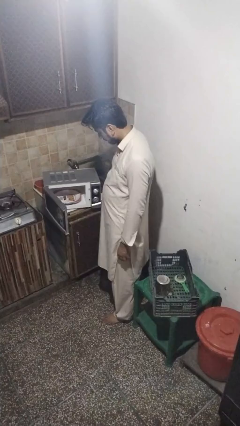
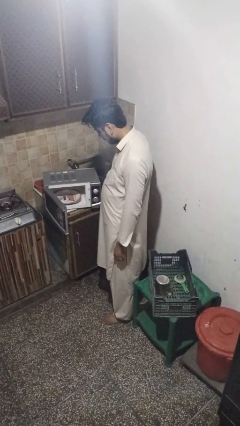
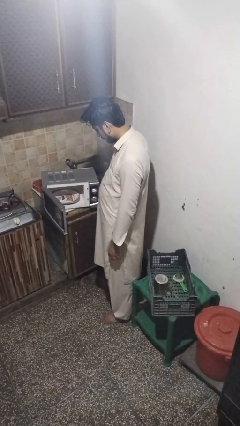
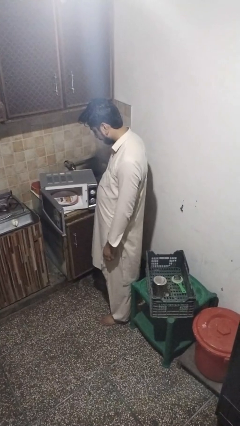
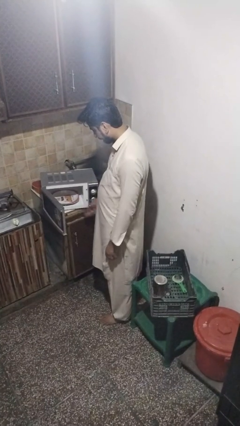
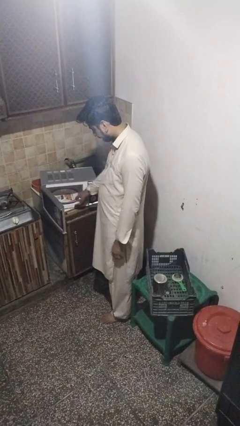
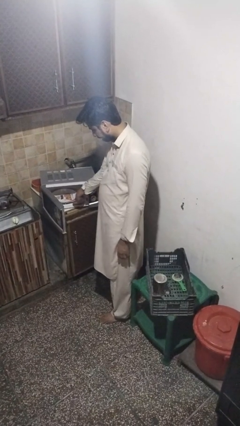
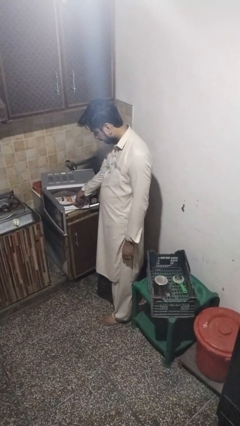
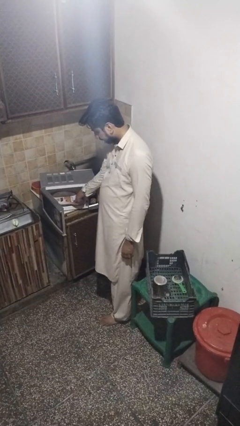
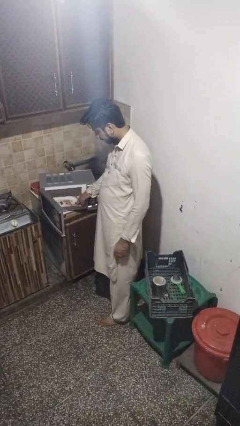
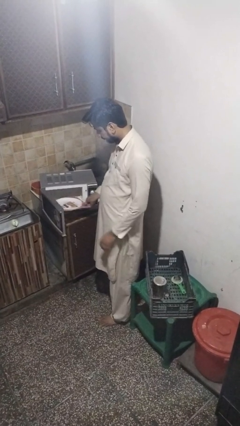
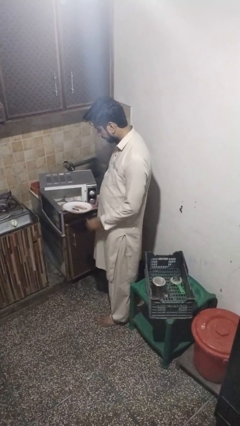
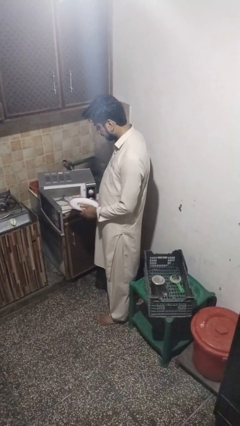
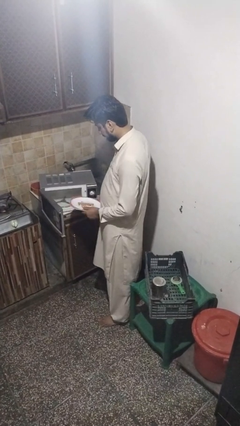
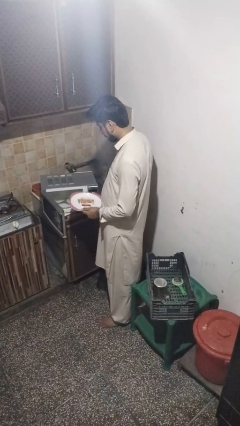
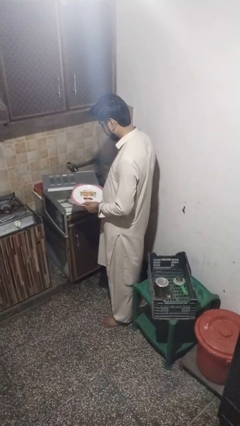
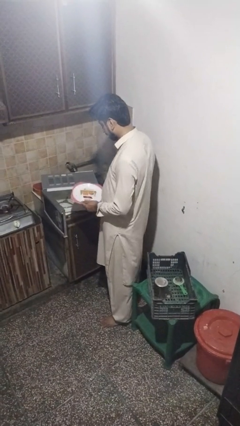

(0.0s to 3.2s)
person takes object from microwave

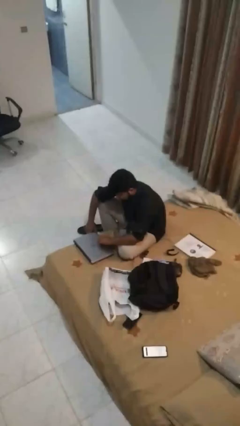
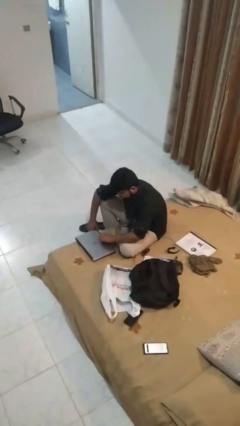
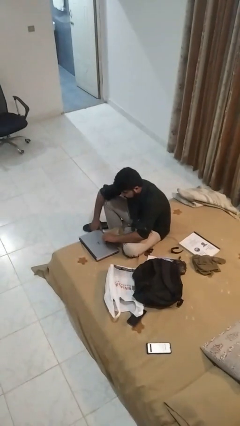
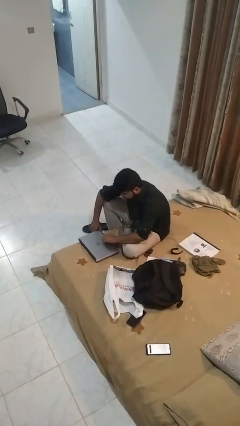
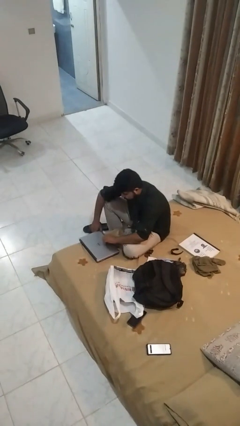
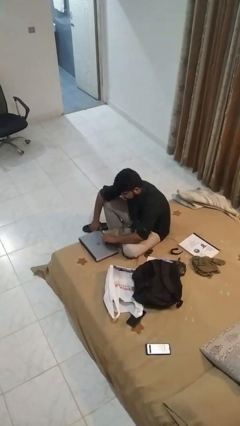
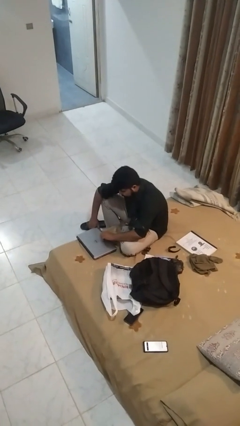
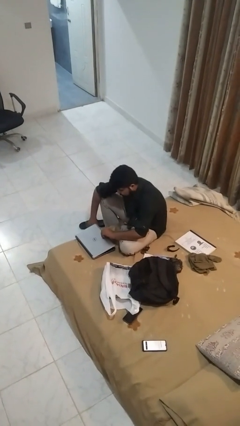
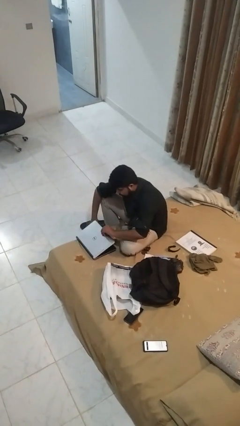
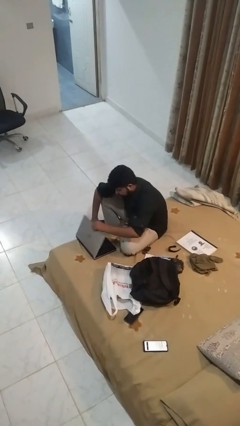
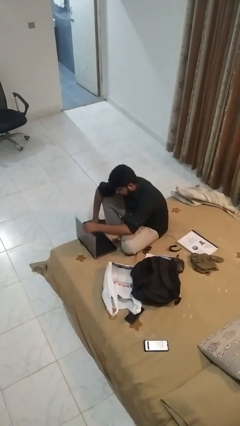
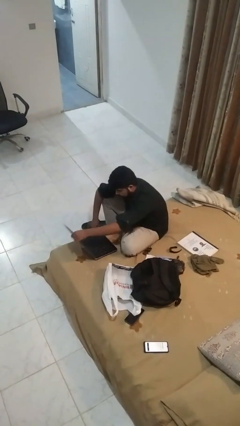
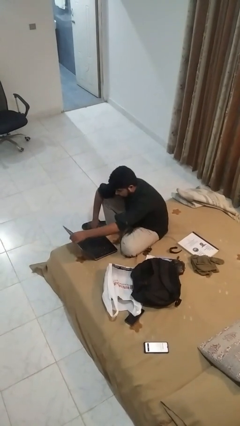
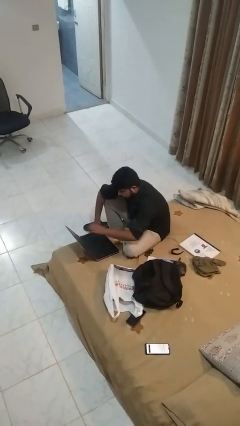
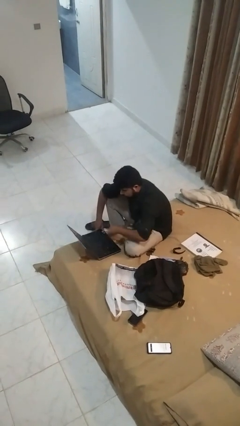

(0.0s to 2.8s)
person opens laptop

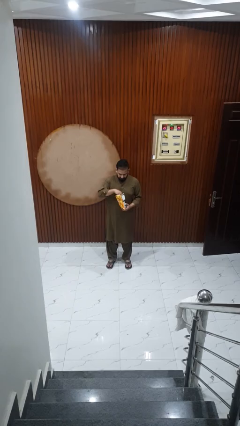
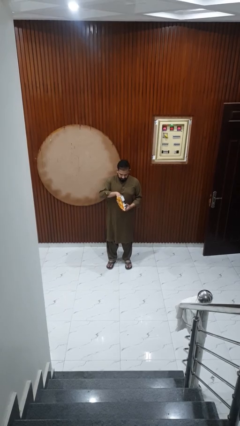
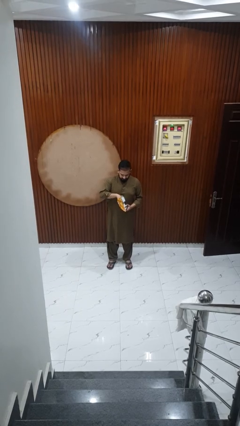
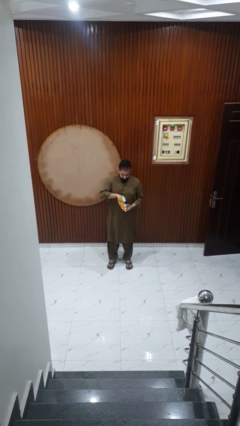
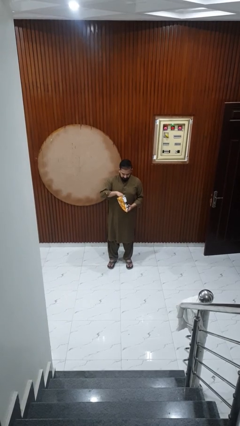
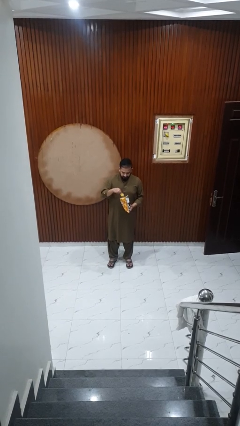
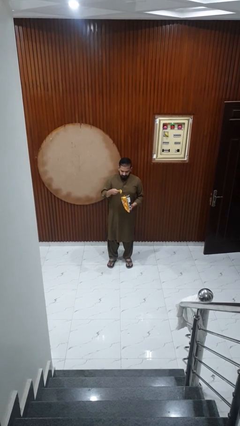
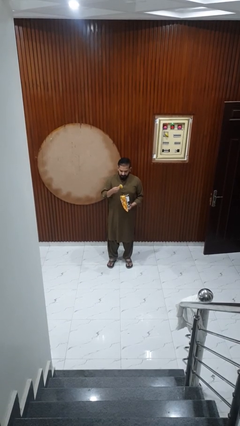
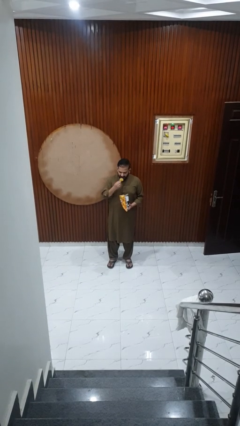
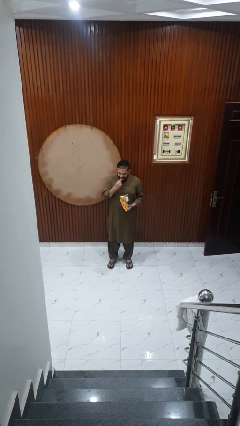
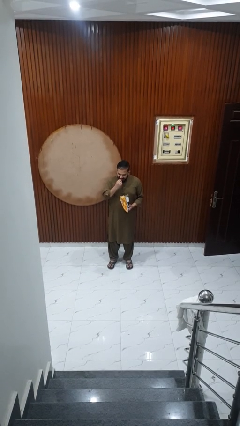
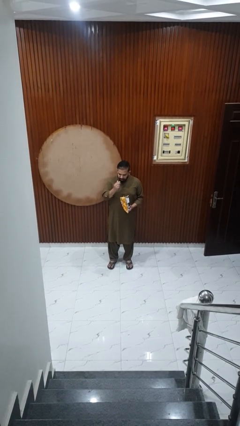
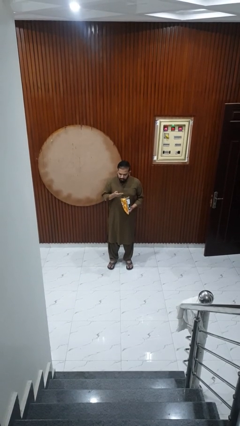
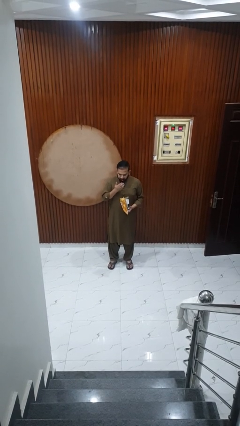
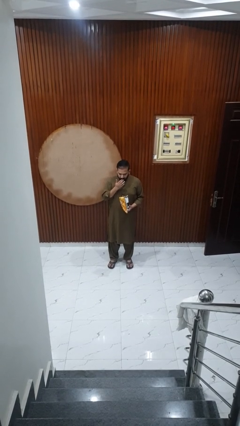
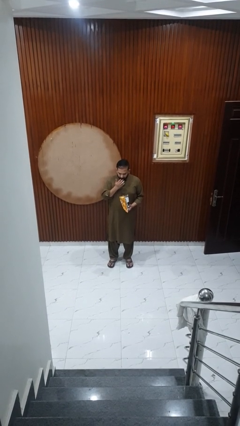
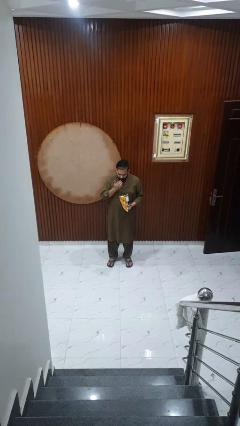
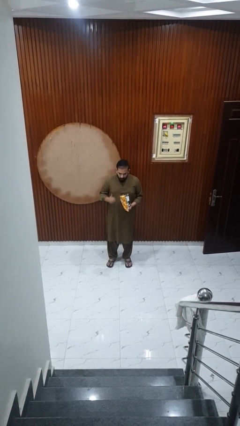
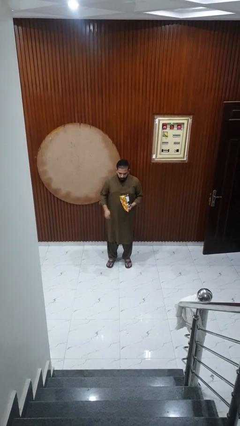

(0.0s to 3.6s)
person eats snack from bag

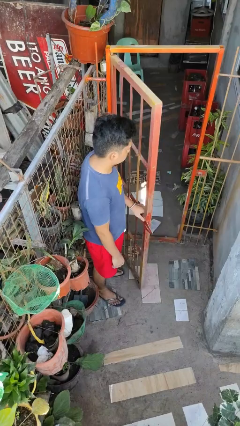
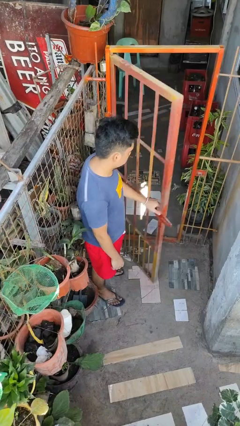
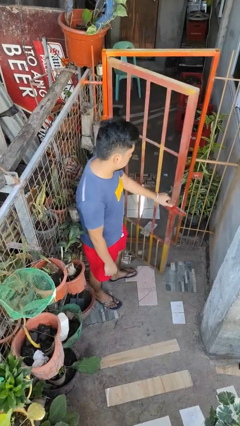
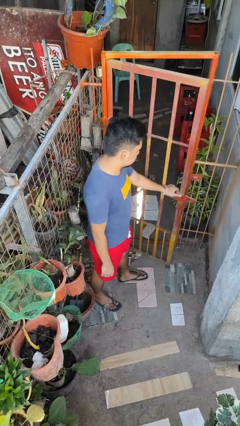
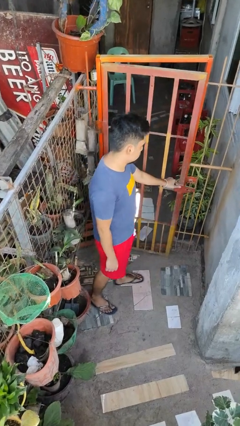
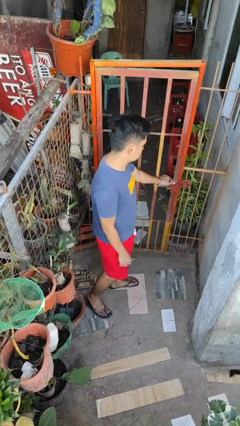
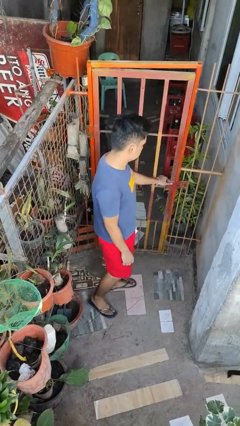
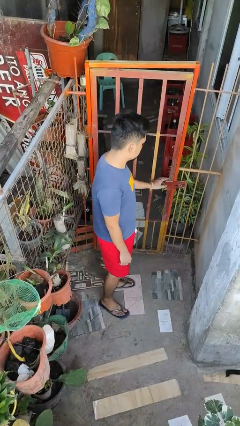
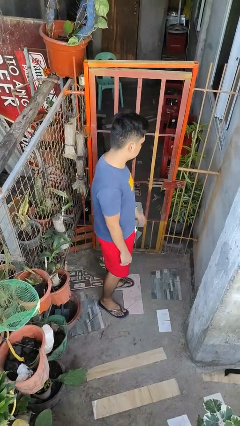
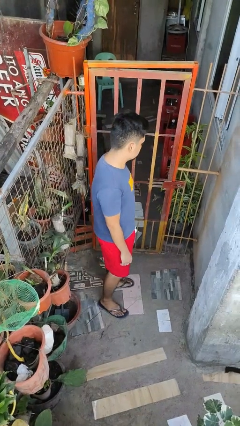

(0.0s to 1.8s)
person closes gate

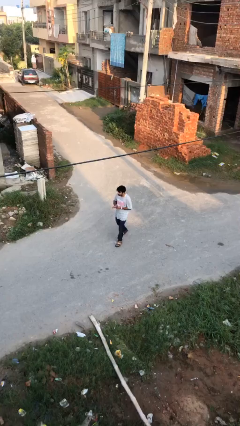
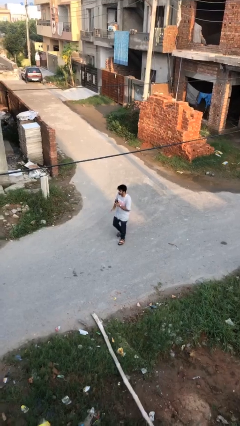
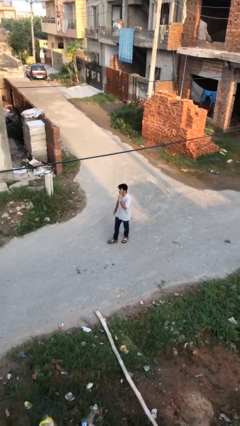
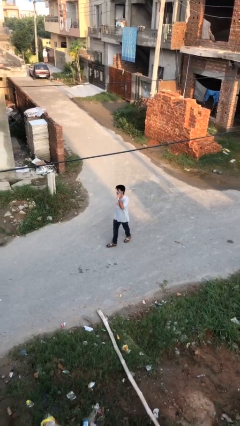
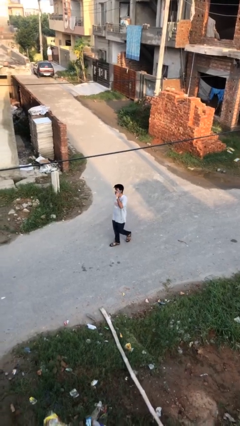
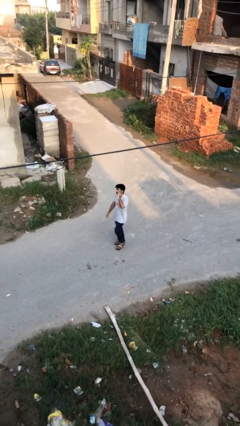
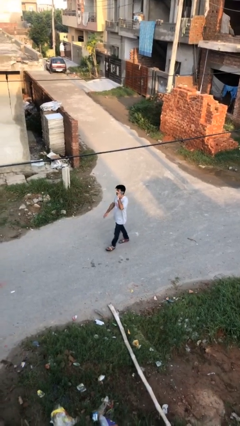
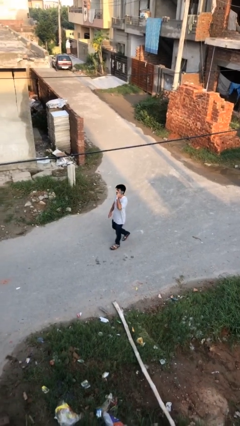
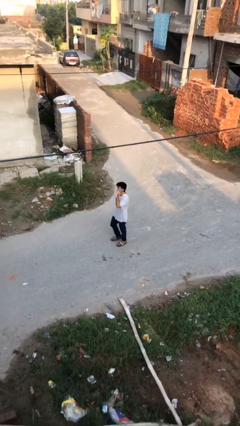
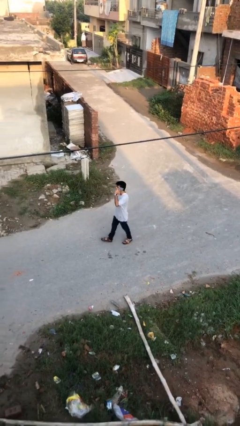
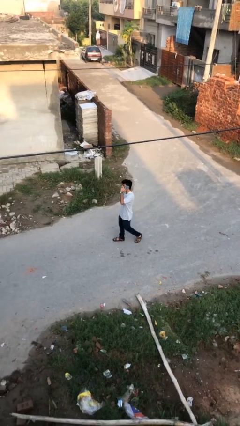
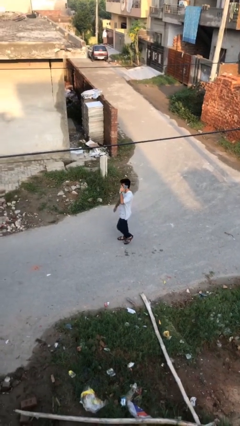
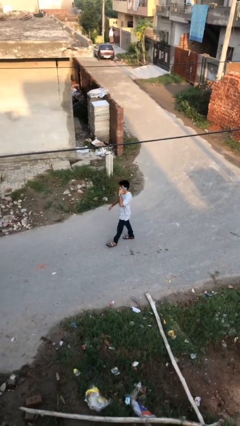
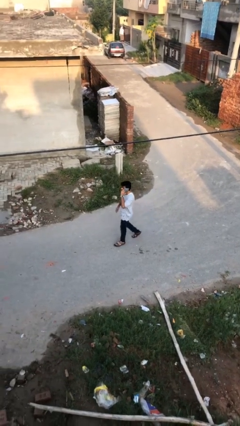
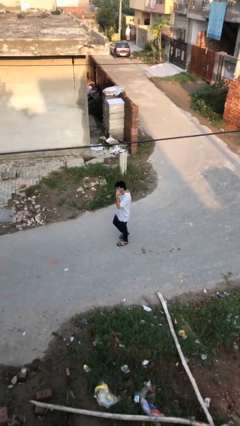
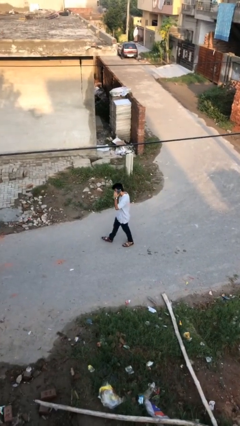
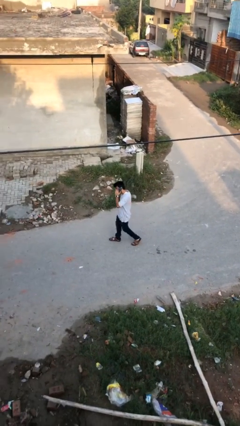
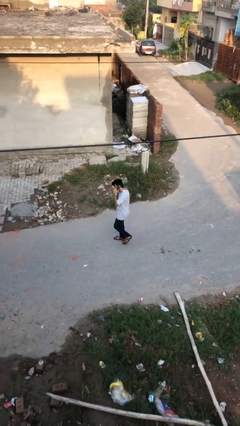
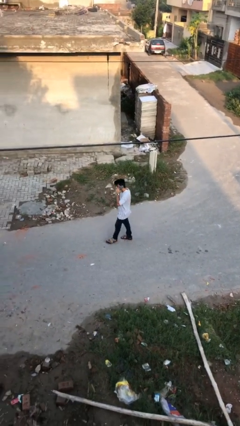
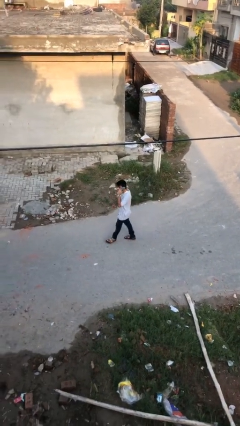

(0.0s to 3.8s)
person talks on phone

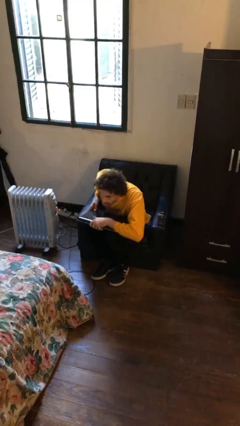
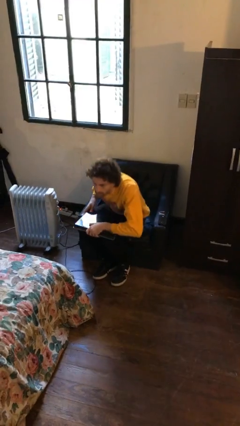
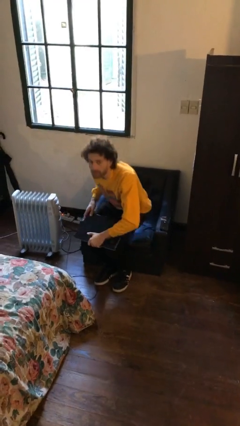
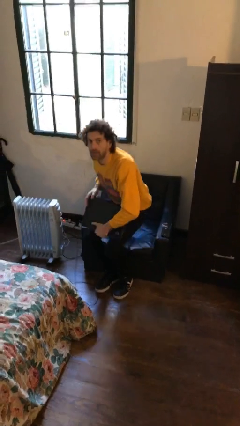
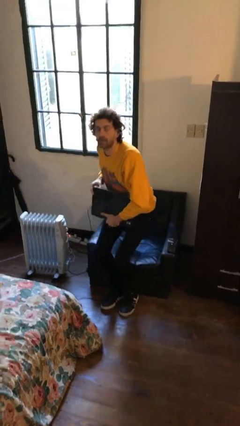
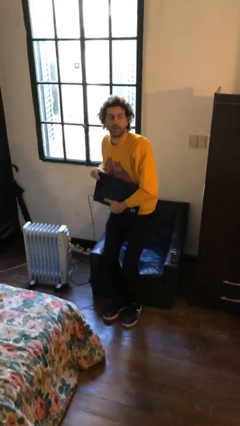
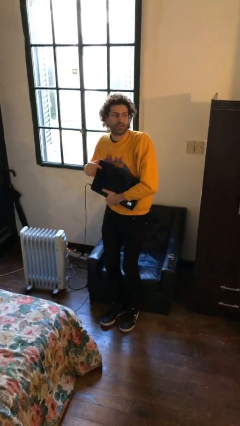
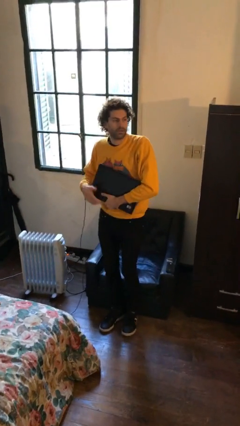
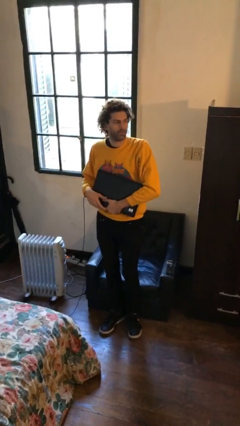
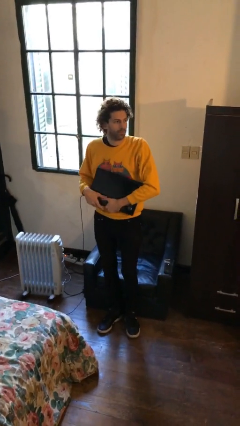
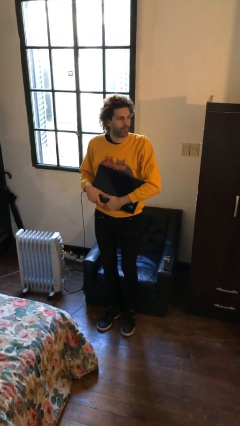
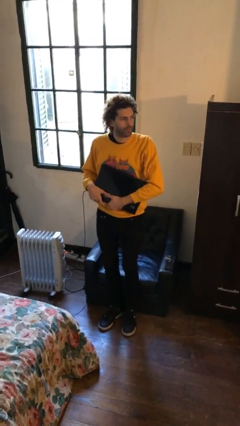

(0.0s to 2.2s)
person stands up
